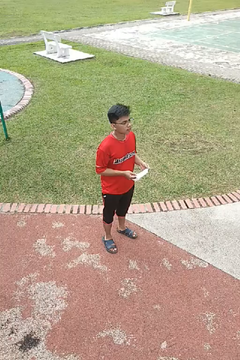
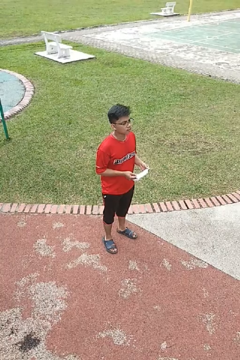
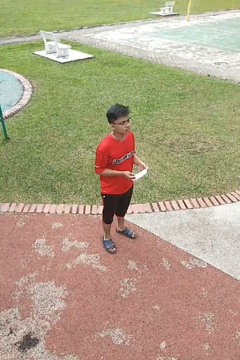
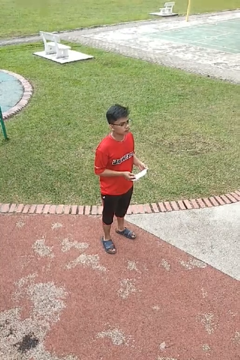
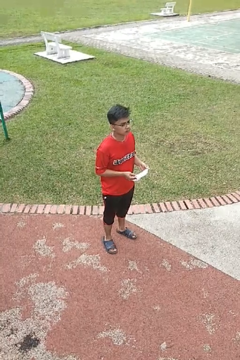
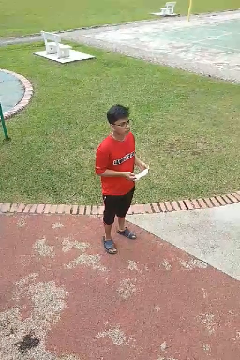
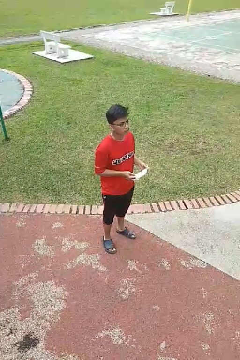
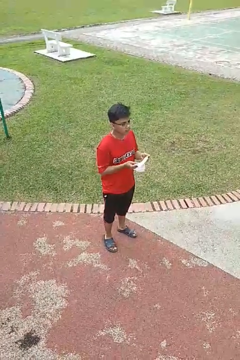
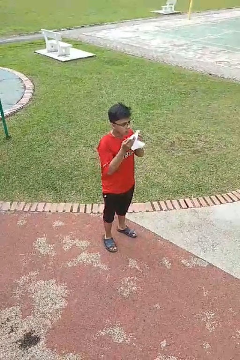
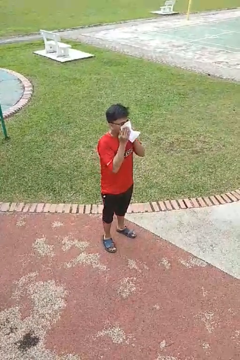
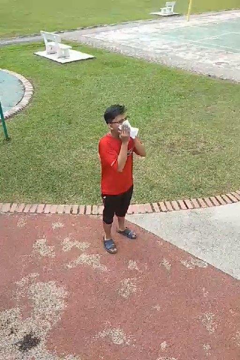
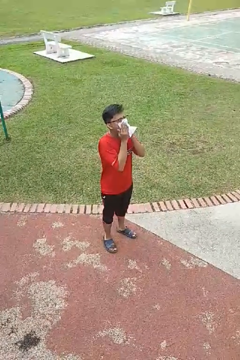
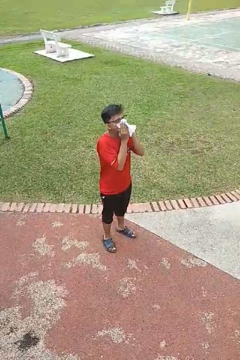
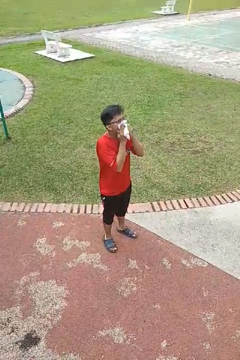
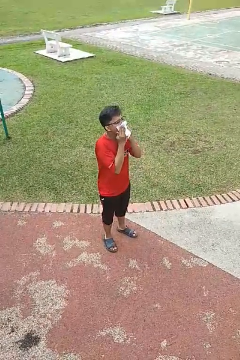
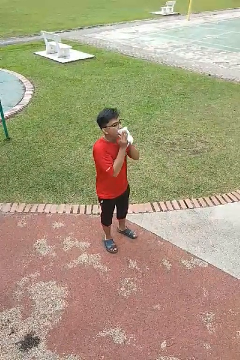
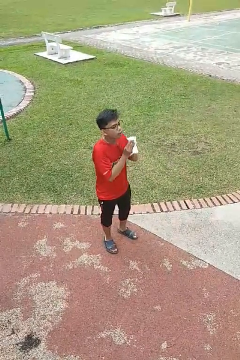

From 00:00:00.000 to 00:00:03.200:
person blows nose

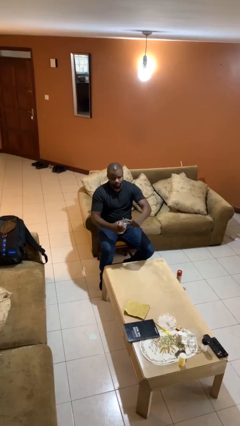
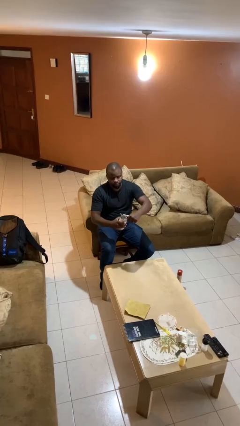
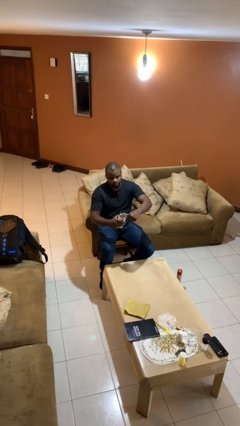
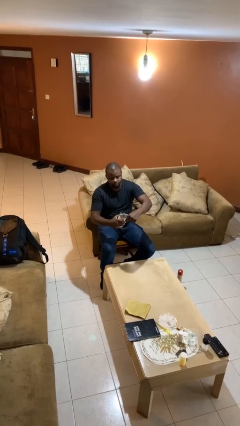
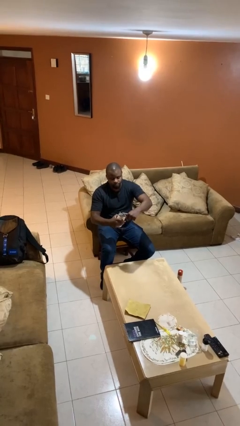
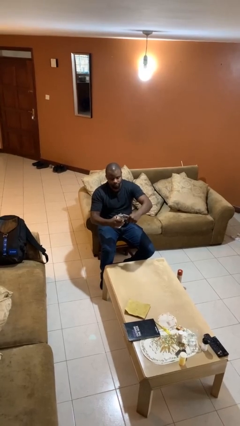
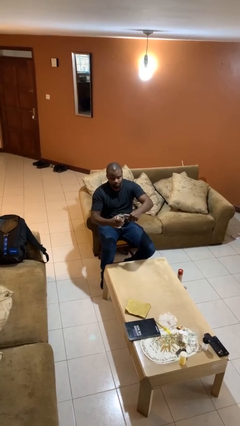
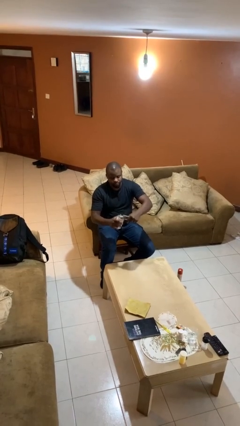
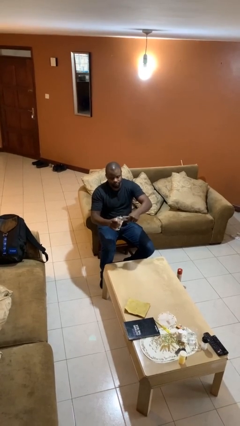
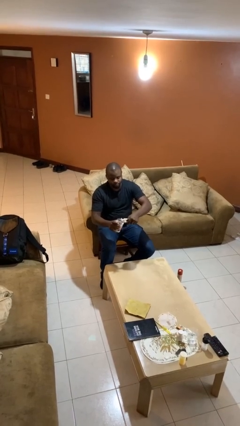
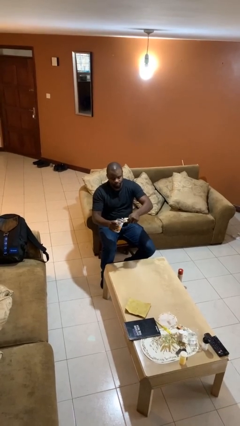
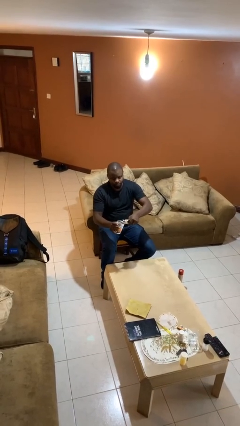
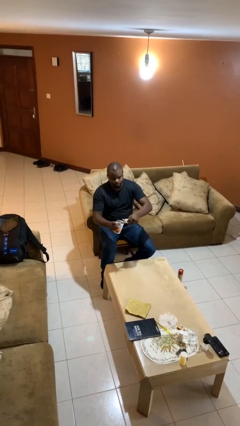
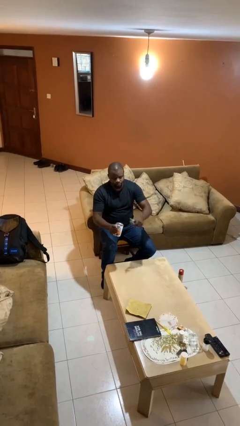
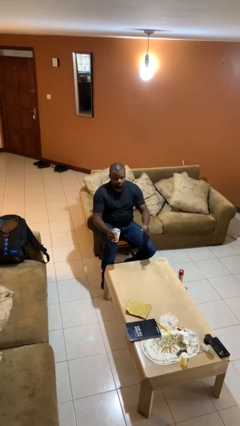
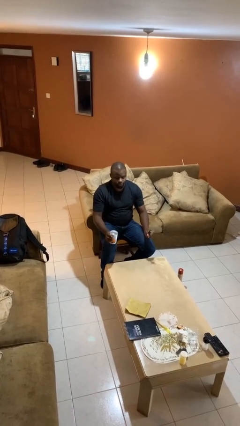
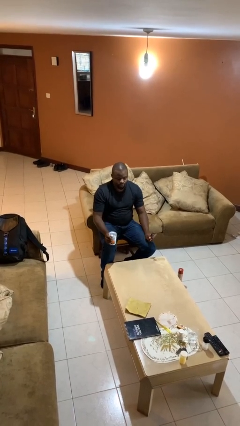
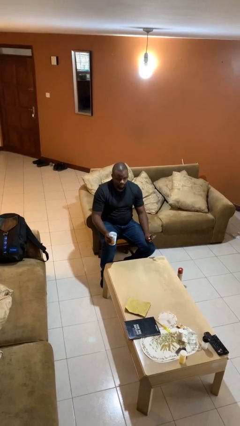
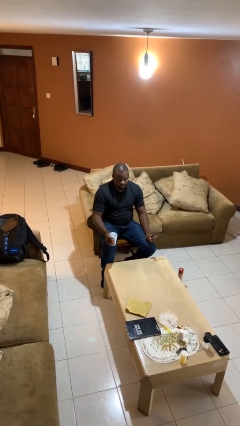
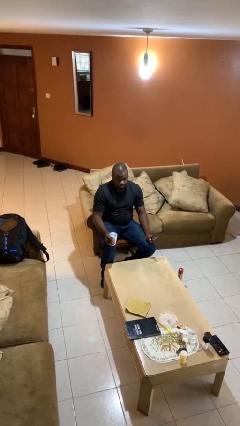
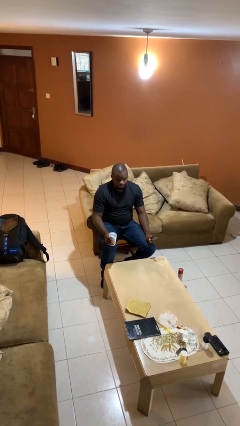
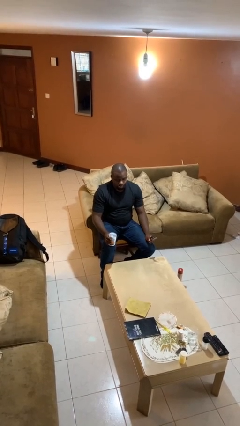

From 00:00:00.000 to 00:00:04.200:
person opens can with can opener

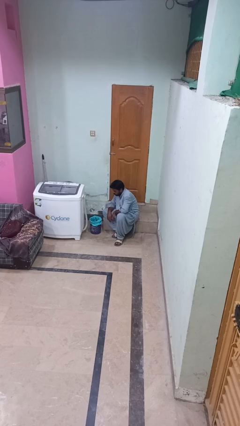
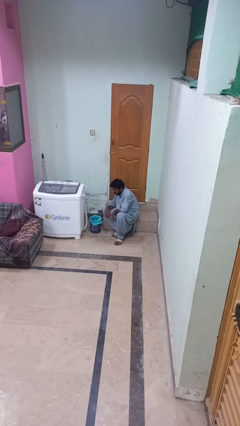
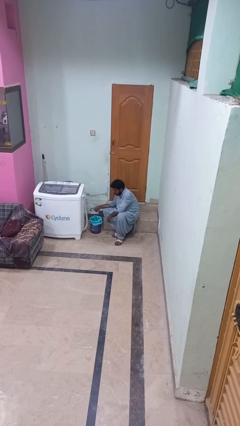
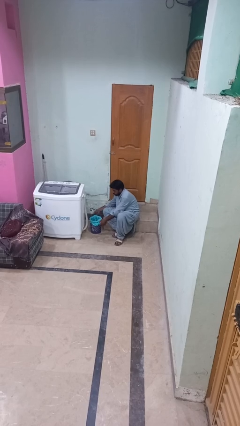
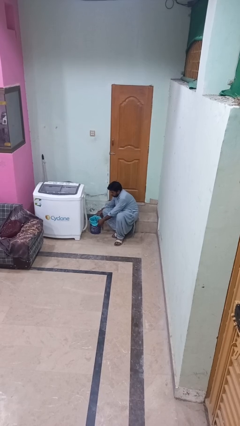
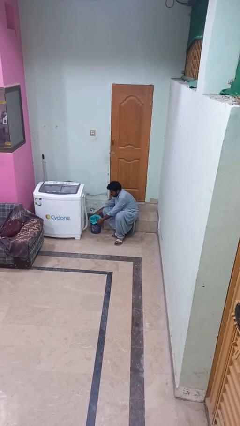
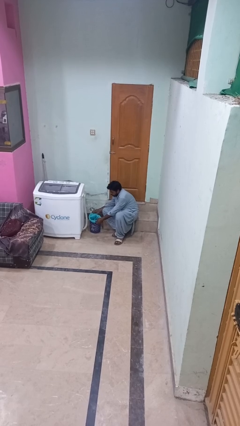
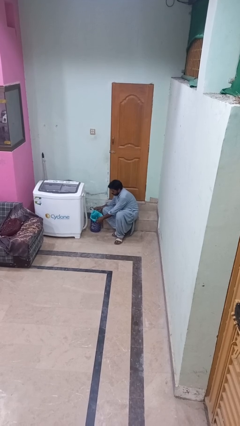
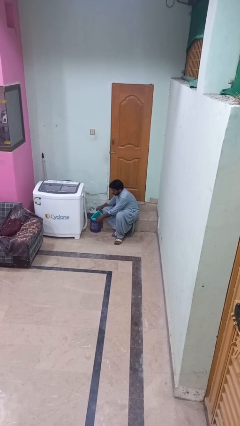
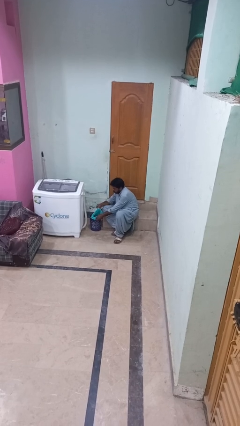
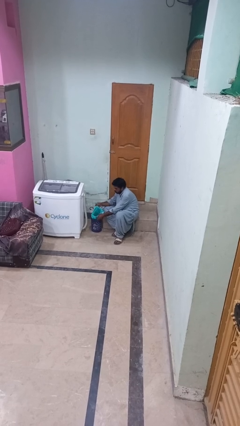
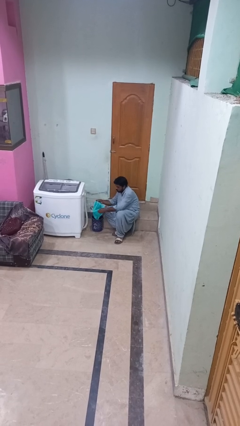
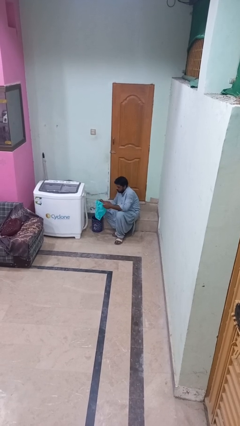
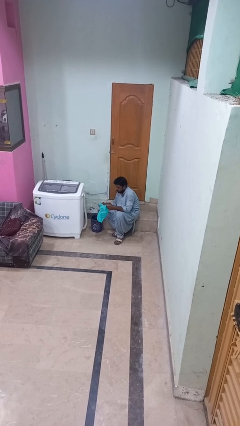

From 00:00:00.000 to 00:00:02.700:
person removes trashbag from trashcan

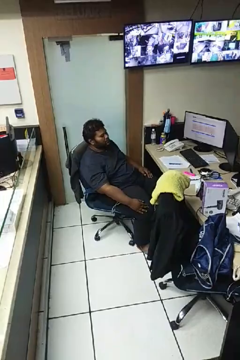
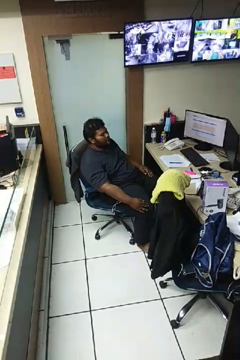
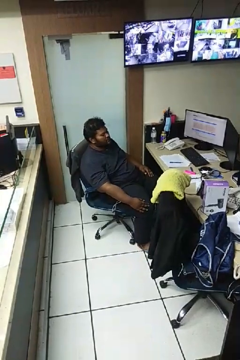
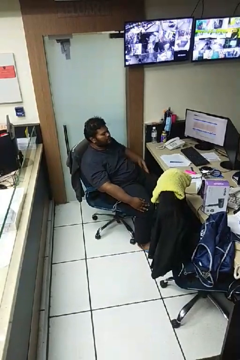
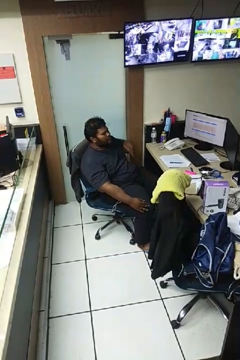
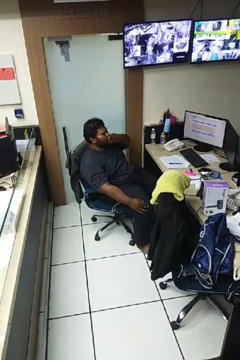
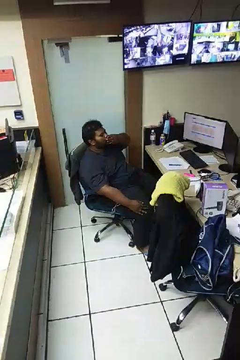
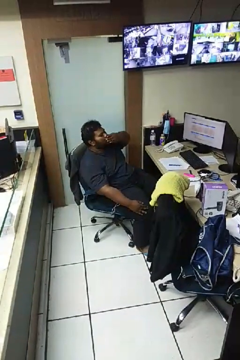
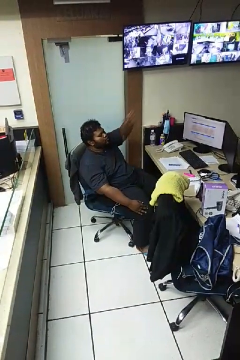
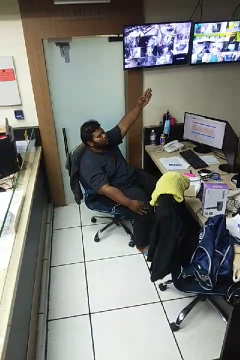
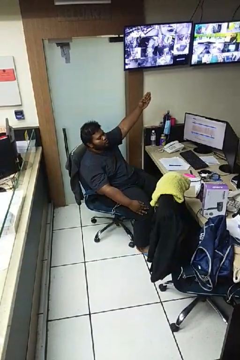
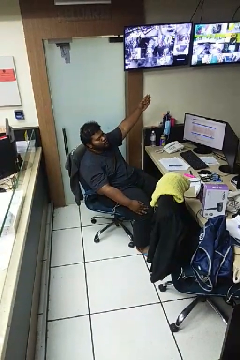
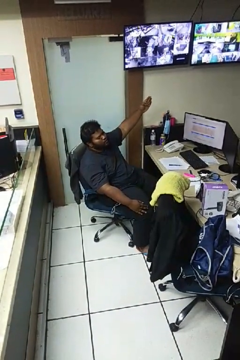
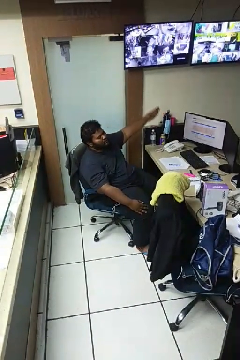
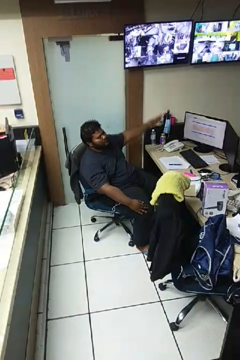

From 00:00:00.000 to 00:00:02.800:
person gestures blow kiss

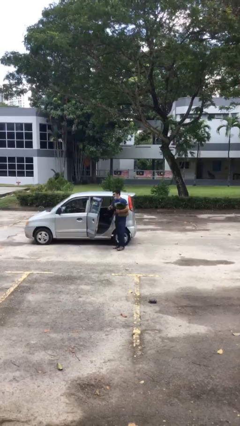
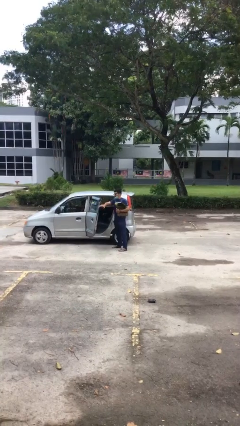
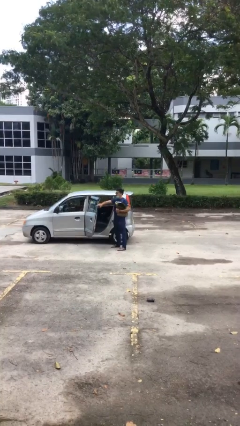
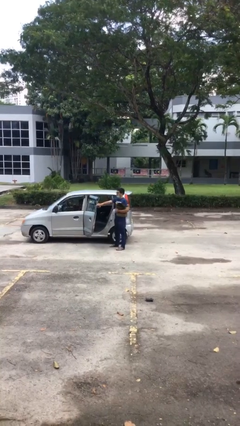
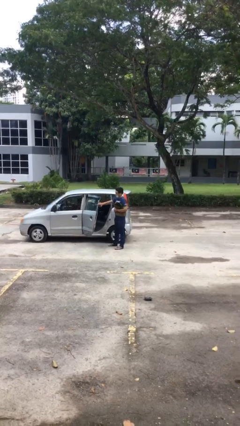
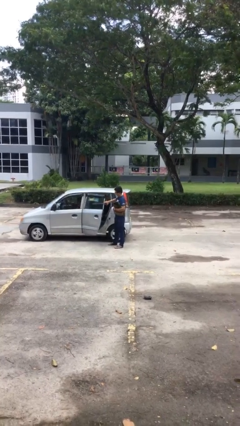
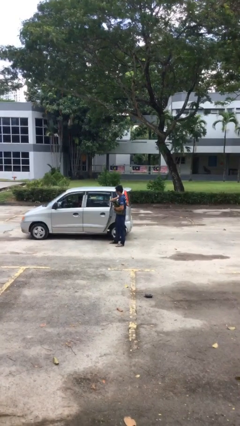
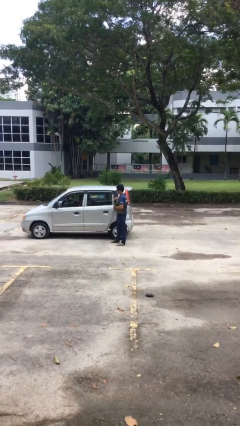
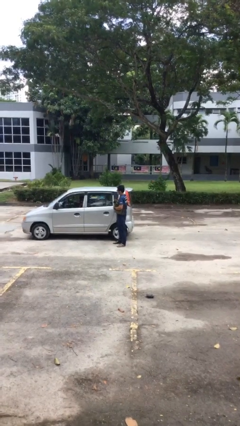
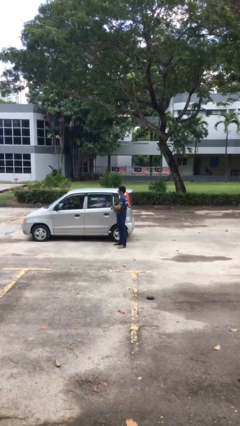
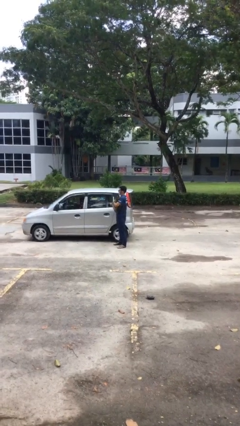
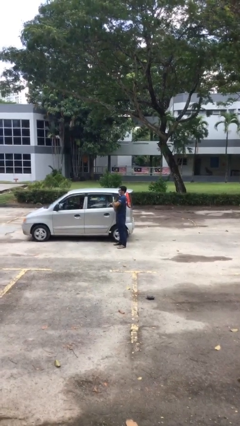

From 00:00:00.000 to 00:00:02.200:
person closes car door

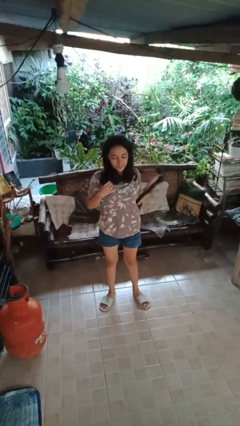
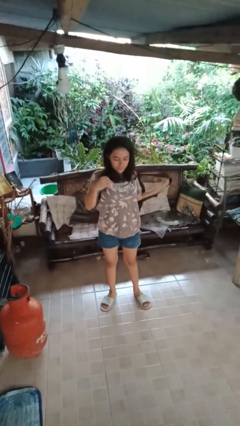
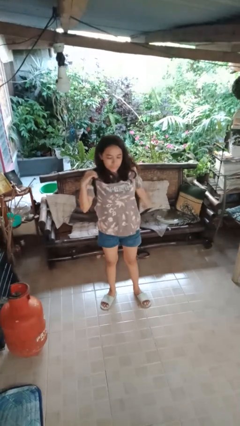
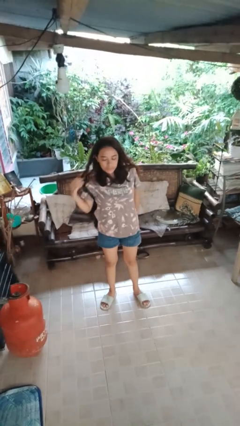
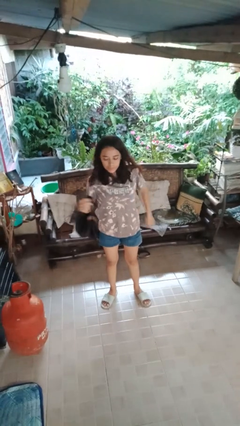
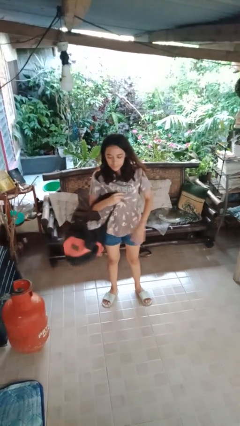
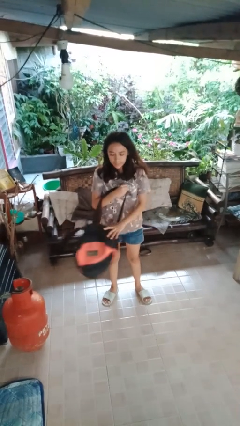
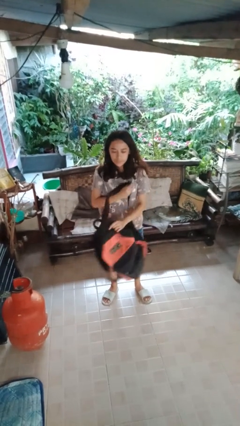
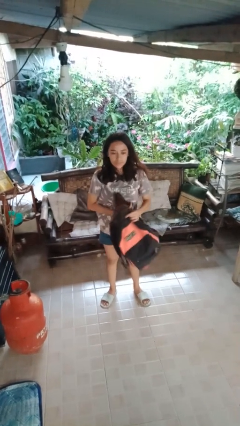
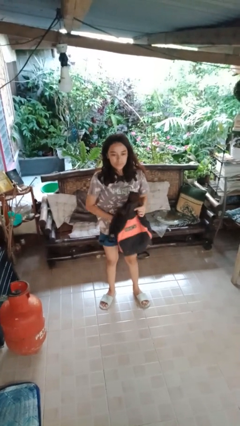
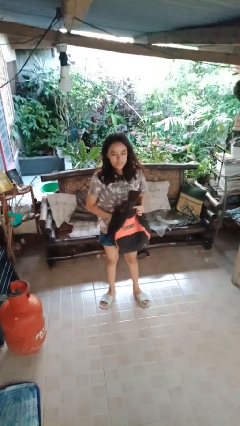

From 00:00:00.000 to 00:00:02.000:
person takes off backpack

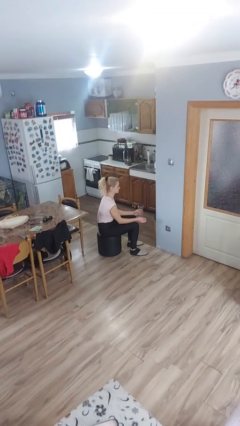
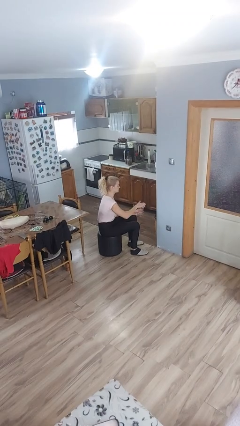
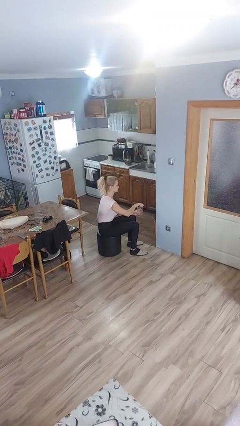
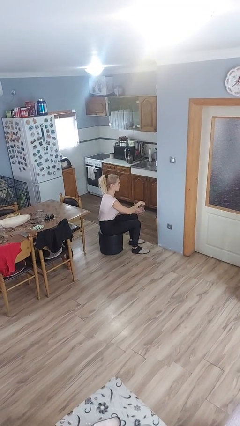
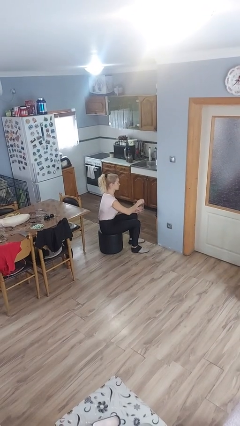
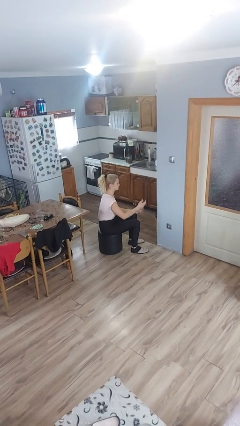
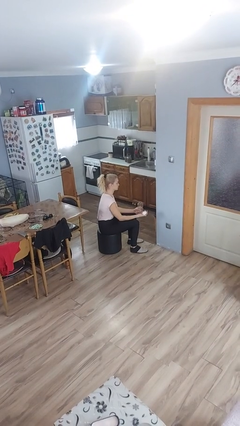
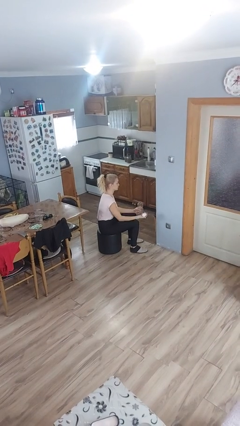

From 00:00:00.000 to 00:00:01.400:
person opens jar
